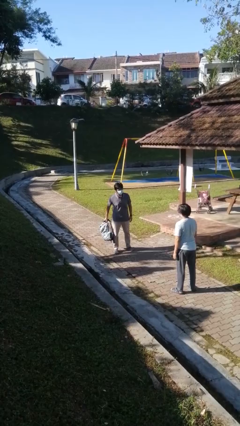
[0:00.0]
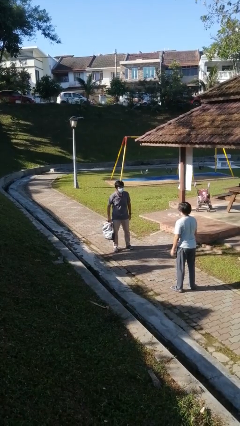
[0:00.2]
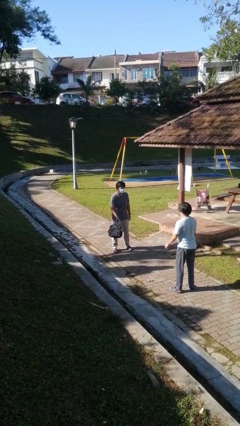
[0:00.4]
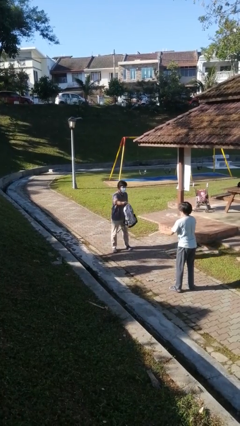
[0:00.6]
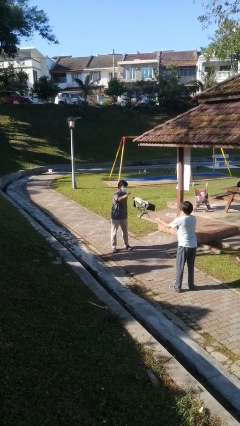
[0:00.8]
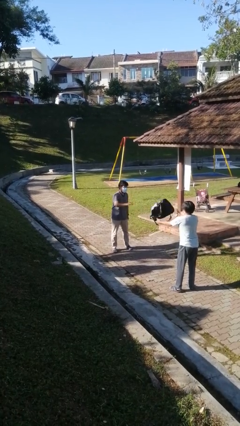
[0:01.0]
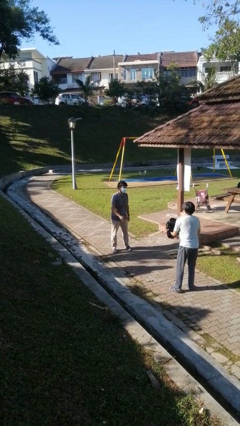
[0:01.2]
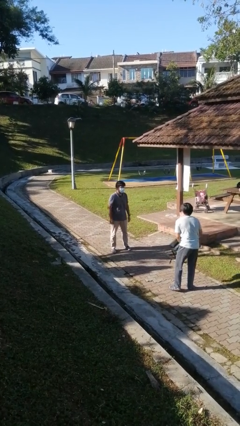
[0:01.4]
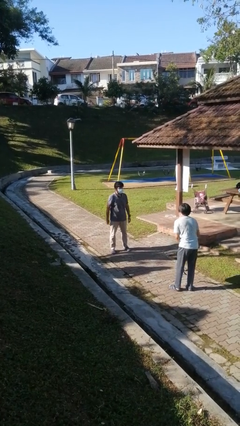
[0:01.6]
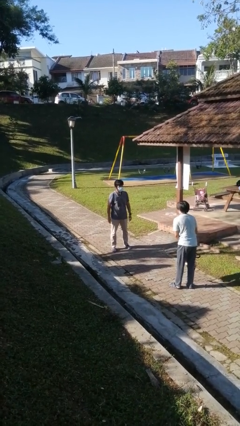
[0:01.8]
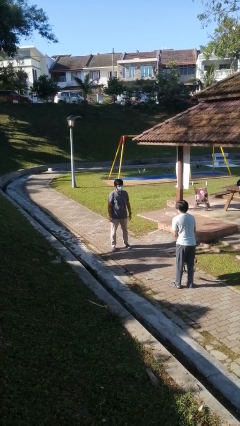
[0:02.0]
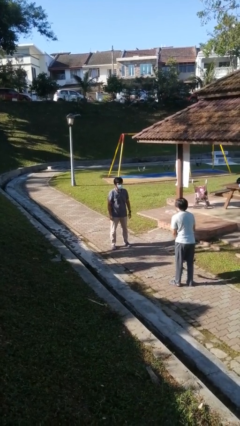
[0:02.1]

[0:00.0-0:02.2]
person throws object to person

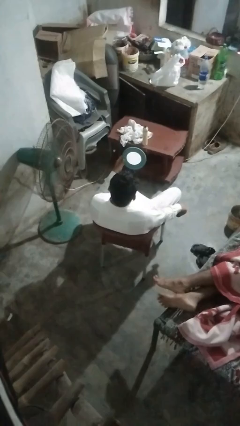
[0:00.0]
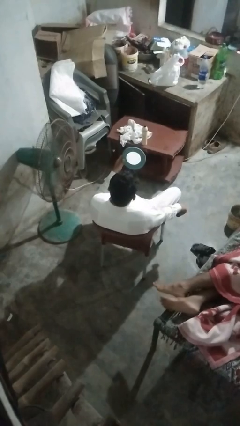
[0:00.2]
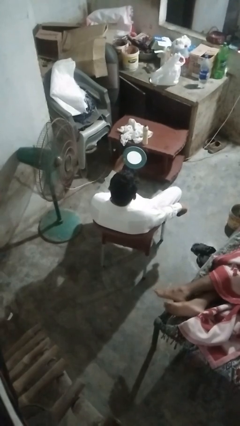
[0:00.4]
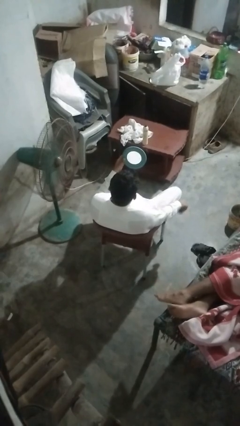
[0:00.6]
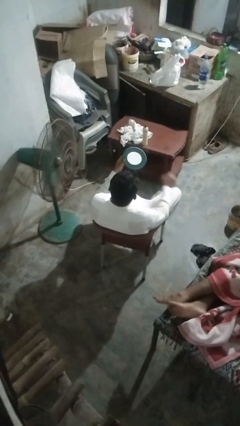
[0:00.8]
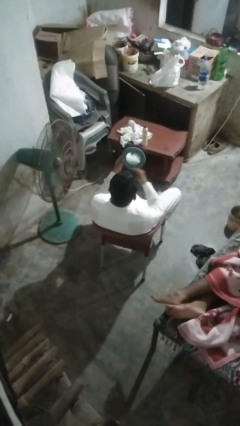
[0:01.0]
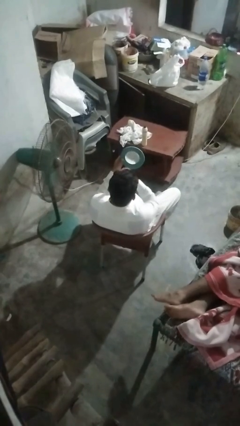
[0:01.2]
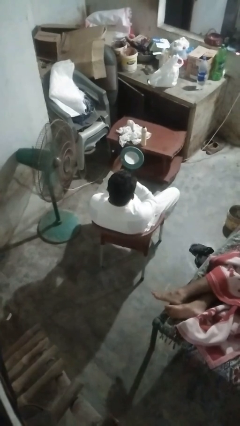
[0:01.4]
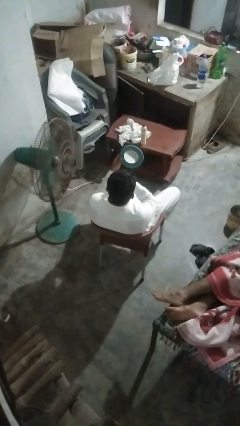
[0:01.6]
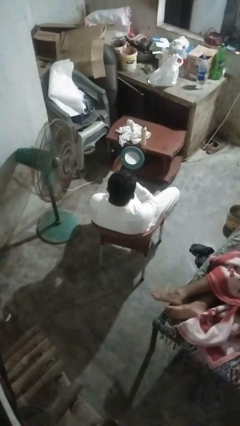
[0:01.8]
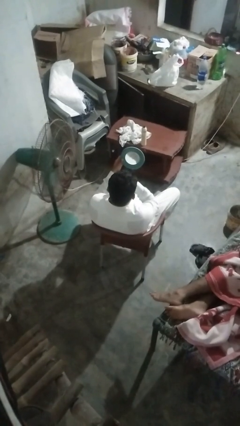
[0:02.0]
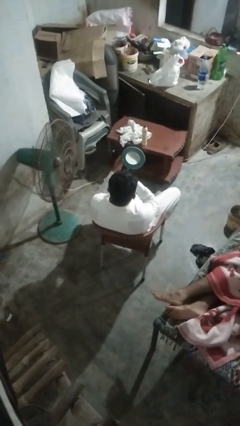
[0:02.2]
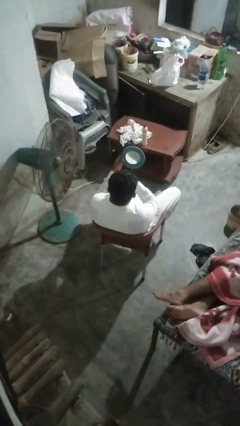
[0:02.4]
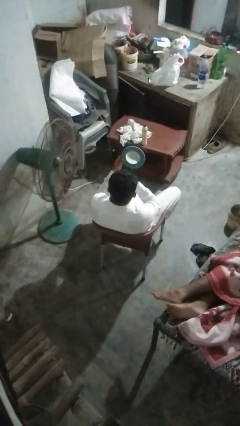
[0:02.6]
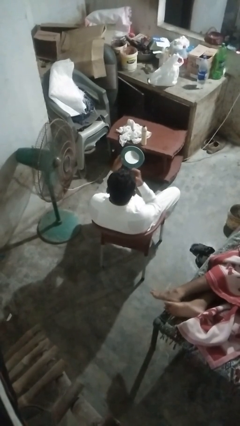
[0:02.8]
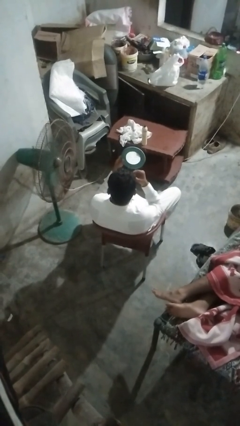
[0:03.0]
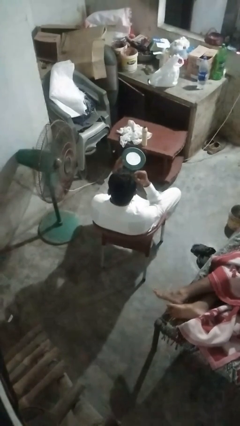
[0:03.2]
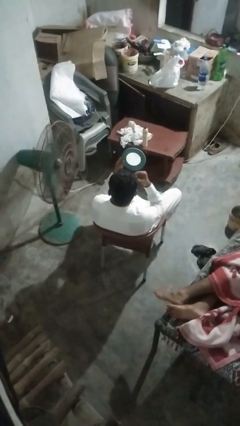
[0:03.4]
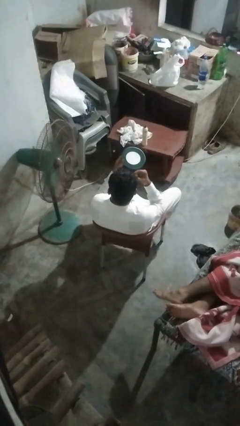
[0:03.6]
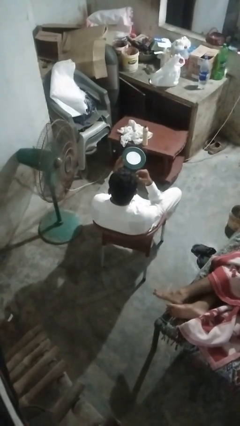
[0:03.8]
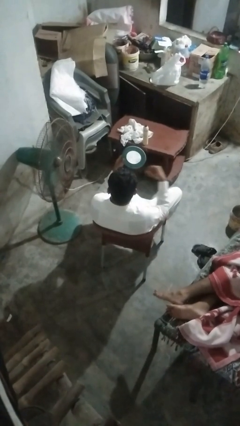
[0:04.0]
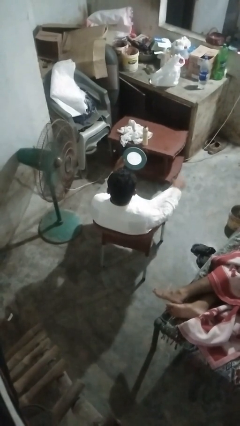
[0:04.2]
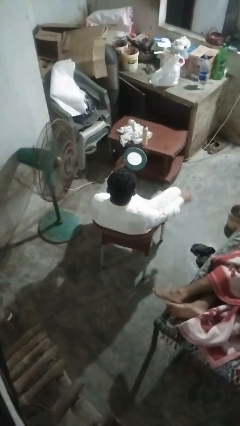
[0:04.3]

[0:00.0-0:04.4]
person applies eye makeup

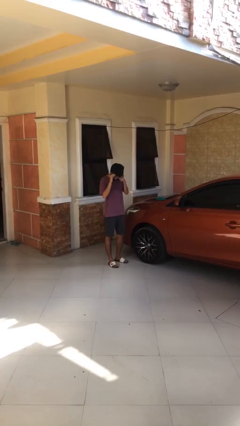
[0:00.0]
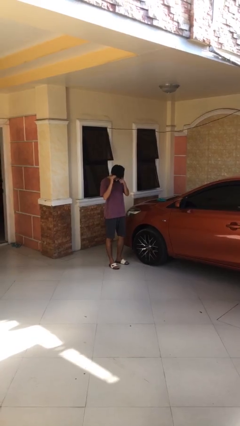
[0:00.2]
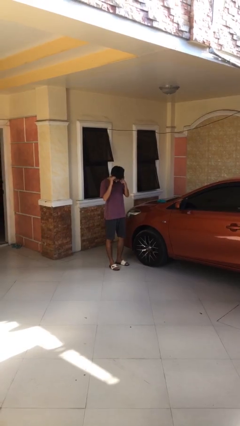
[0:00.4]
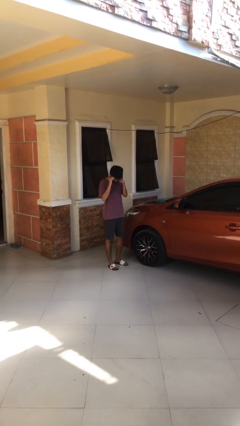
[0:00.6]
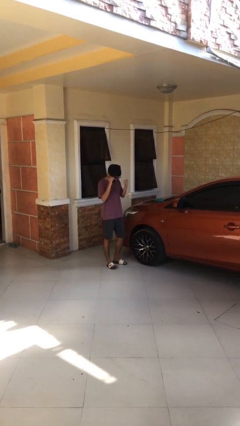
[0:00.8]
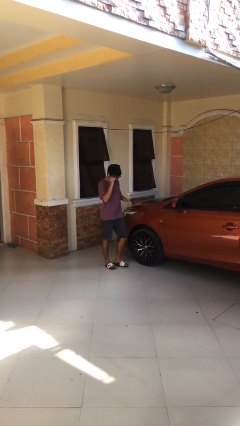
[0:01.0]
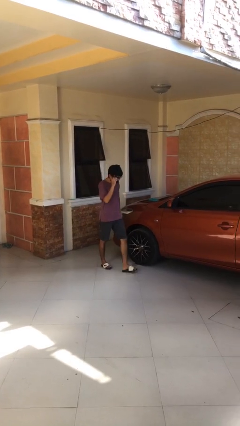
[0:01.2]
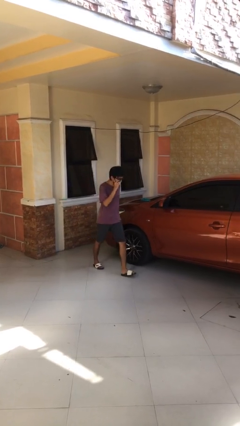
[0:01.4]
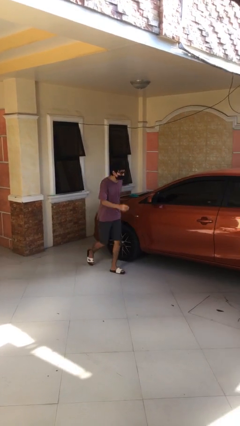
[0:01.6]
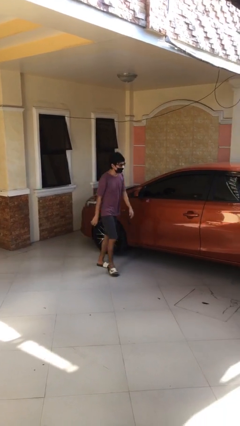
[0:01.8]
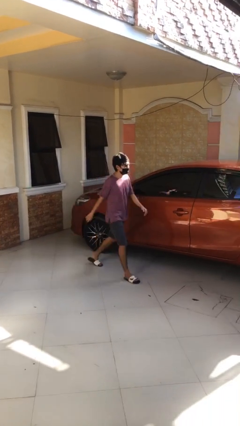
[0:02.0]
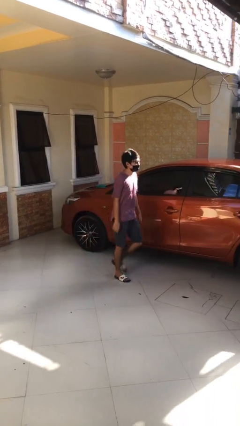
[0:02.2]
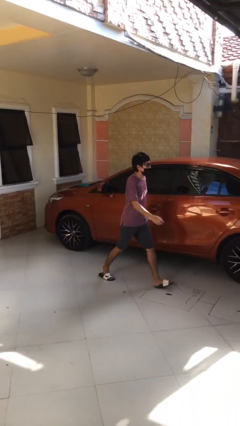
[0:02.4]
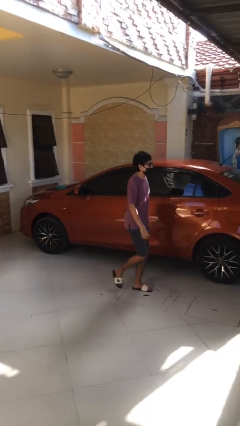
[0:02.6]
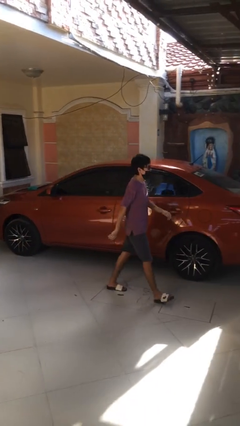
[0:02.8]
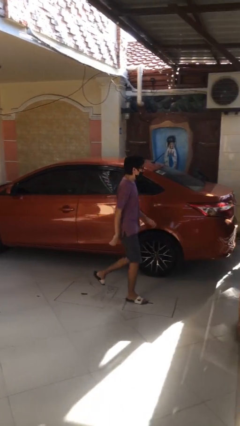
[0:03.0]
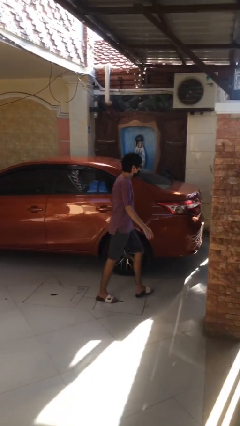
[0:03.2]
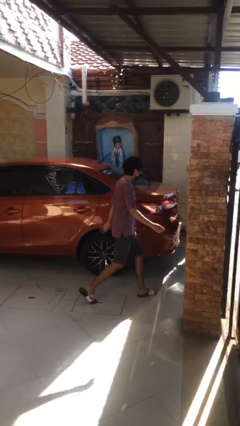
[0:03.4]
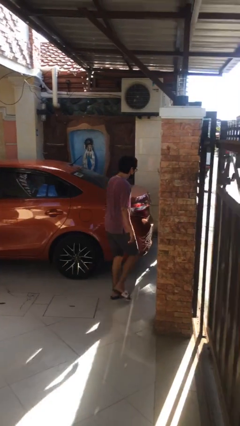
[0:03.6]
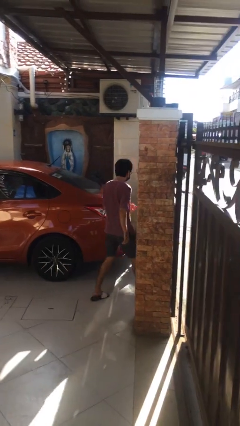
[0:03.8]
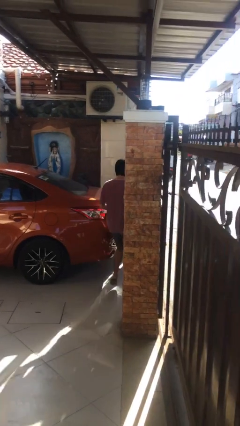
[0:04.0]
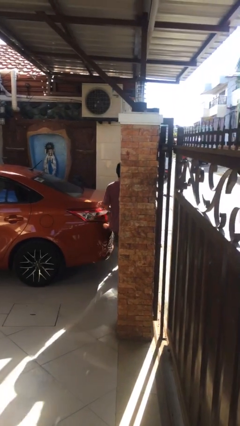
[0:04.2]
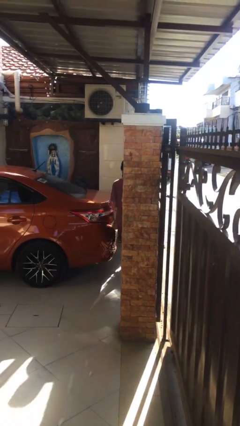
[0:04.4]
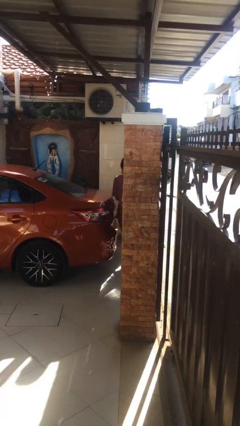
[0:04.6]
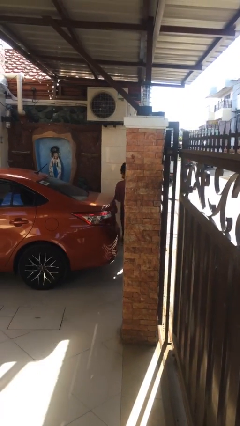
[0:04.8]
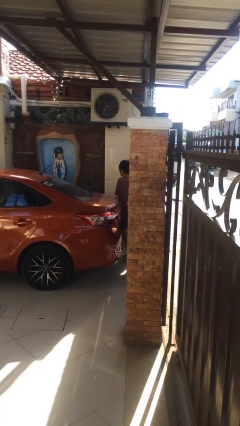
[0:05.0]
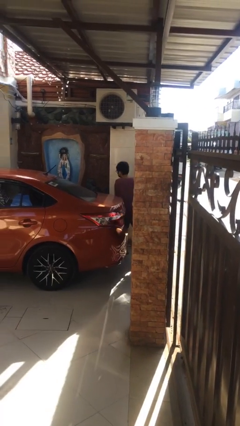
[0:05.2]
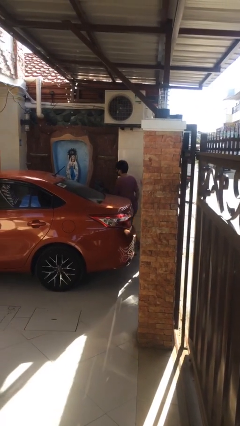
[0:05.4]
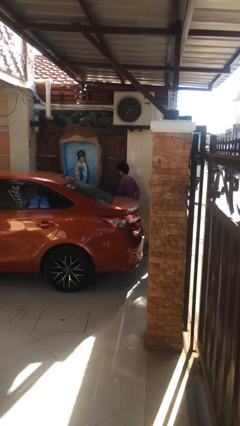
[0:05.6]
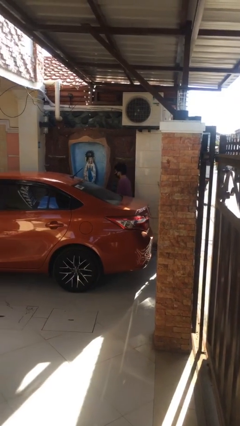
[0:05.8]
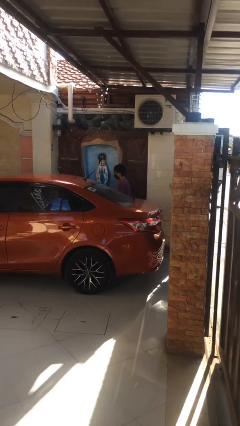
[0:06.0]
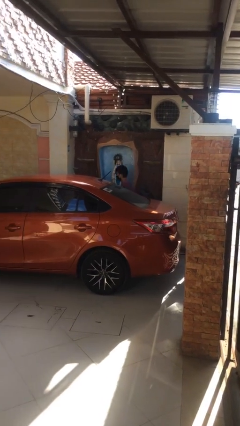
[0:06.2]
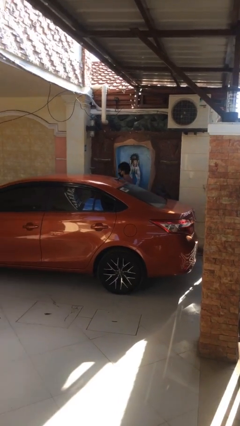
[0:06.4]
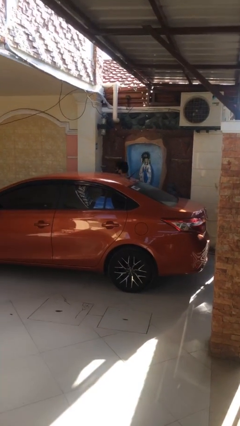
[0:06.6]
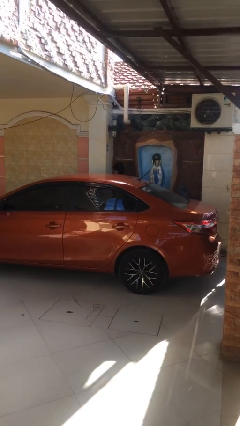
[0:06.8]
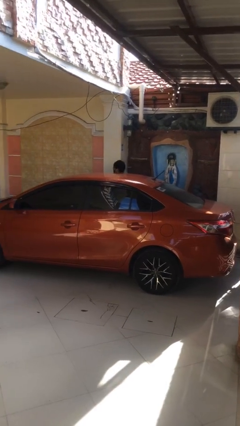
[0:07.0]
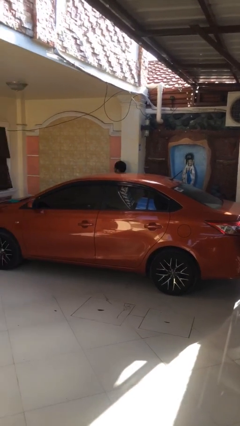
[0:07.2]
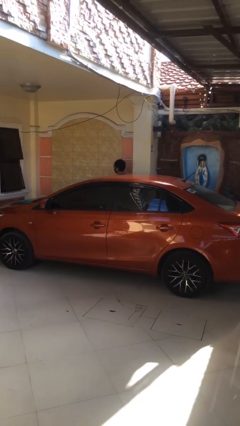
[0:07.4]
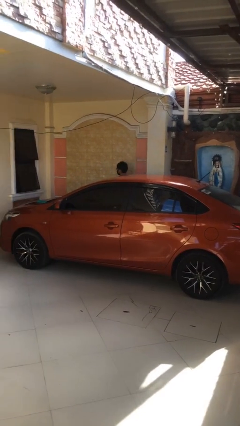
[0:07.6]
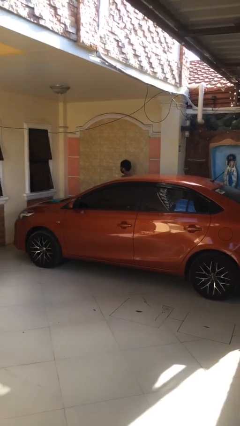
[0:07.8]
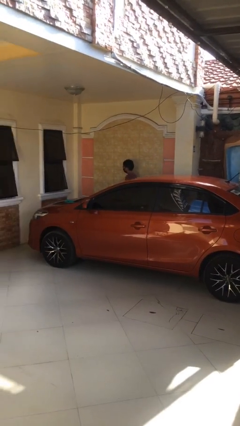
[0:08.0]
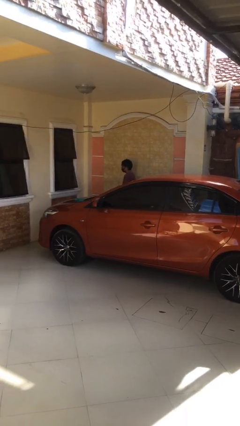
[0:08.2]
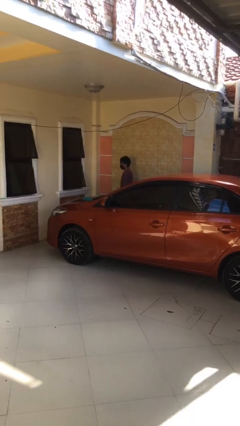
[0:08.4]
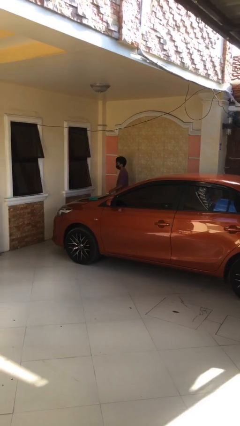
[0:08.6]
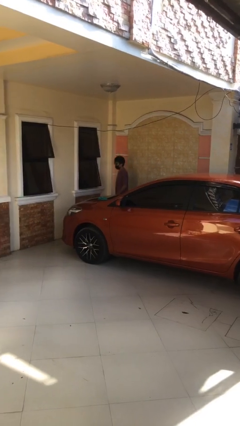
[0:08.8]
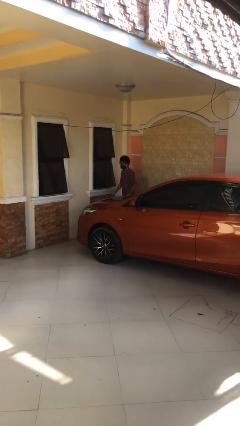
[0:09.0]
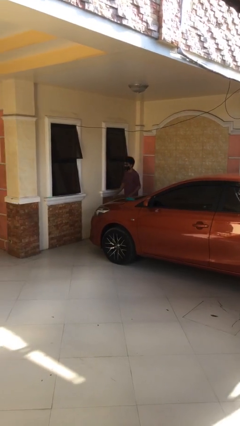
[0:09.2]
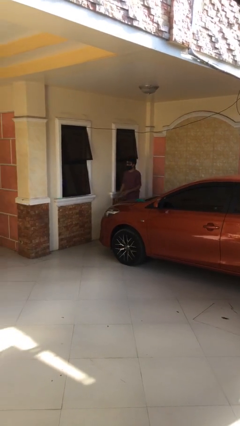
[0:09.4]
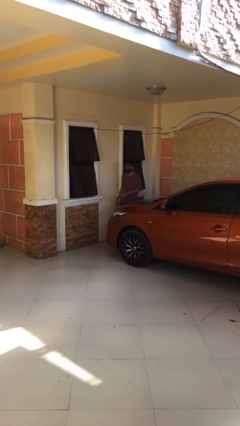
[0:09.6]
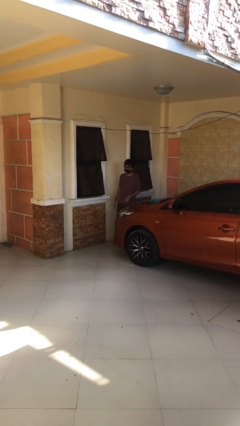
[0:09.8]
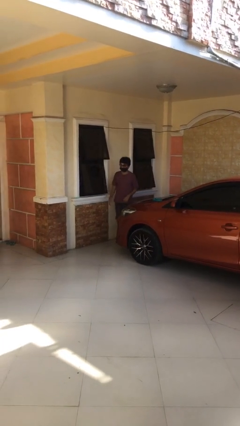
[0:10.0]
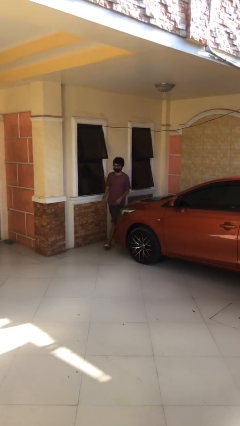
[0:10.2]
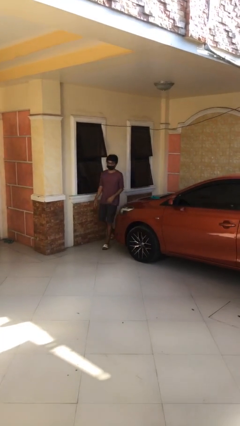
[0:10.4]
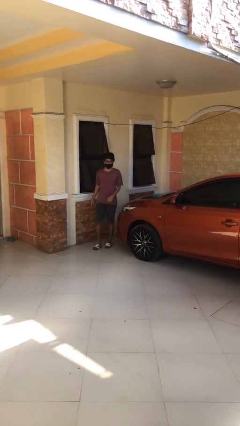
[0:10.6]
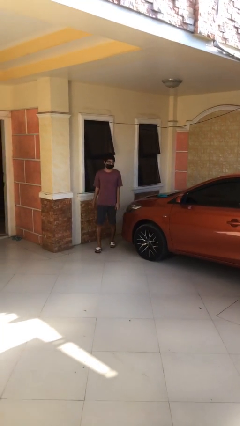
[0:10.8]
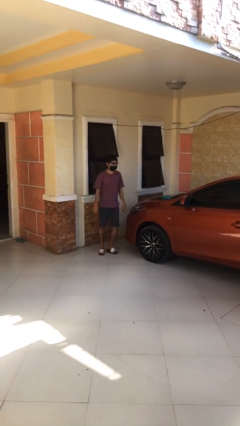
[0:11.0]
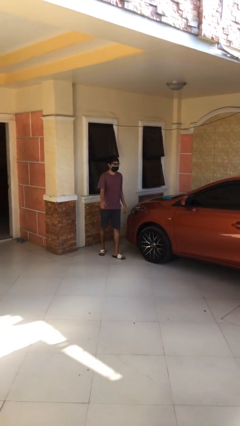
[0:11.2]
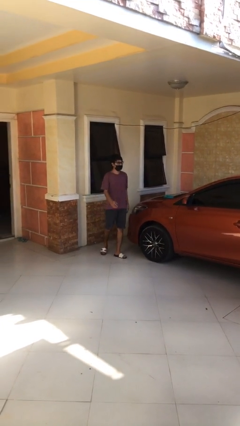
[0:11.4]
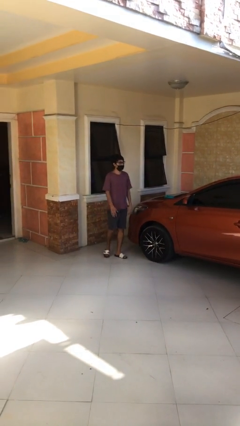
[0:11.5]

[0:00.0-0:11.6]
person walks around car
